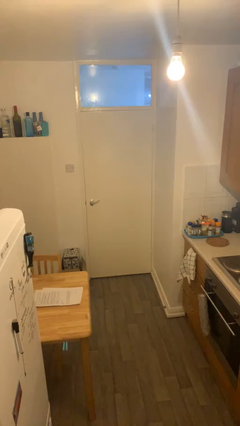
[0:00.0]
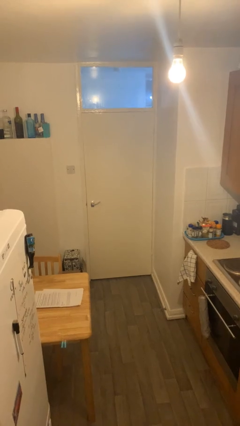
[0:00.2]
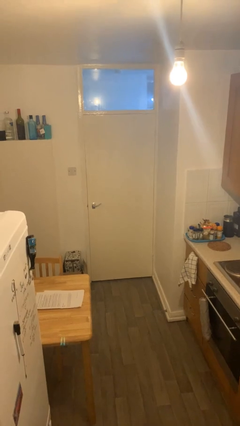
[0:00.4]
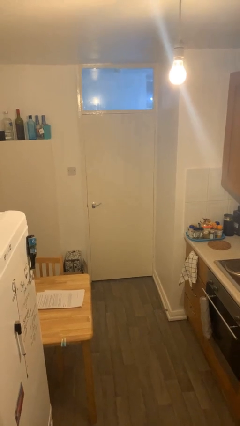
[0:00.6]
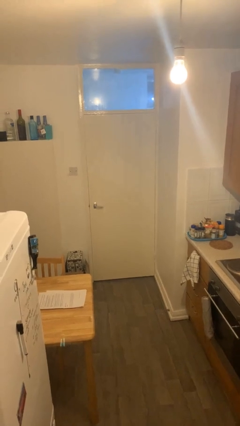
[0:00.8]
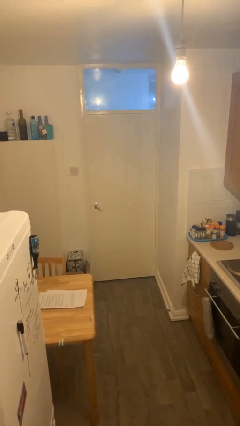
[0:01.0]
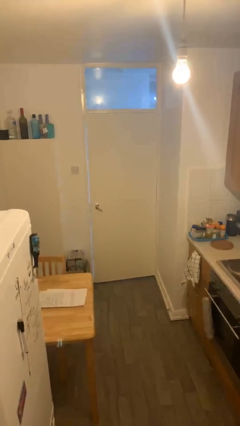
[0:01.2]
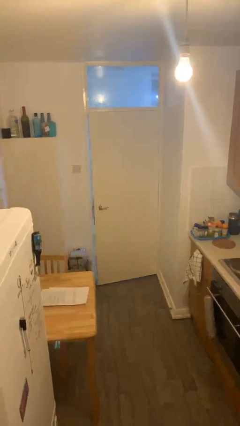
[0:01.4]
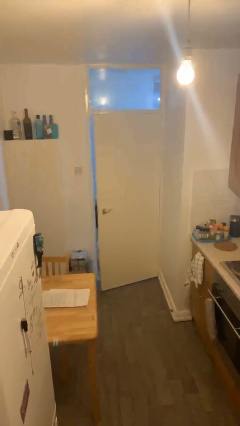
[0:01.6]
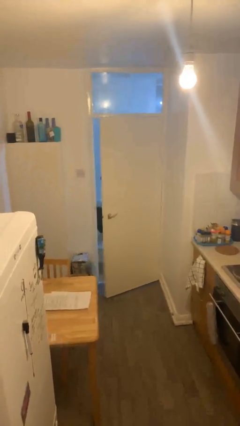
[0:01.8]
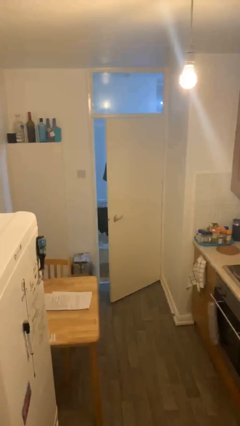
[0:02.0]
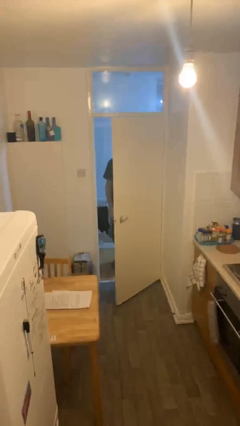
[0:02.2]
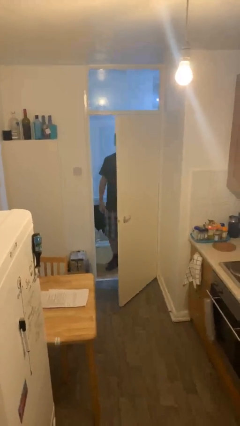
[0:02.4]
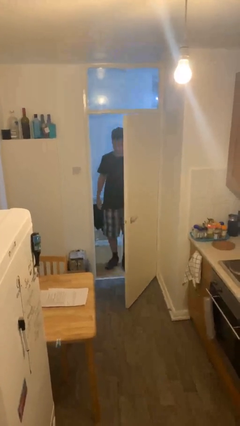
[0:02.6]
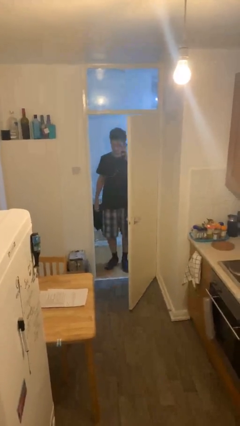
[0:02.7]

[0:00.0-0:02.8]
person opens facility door

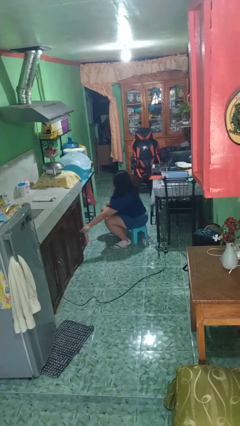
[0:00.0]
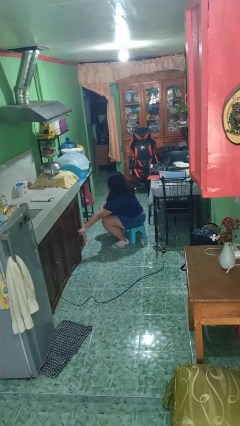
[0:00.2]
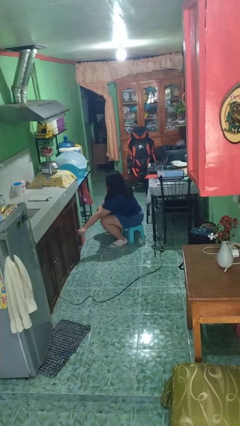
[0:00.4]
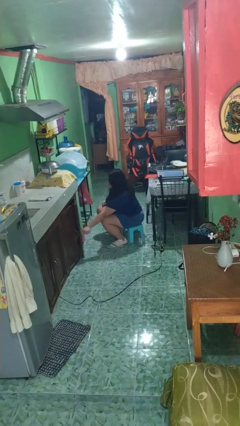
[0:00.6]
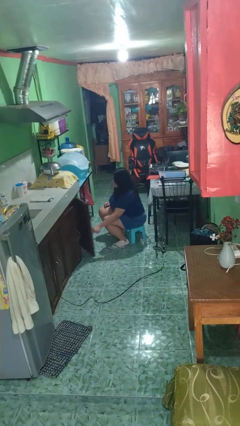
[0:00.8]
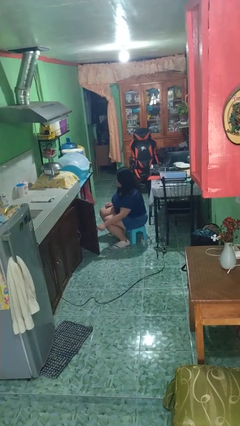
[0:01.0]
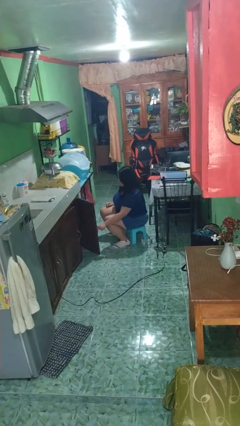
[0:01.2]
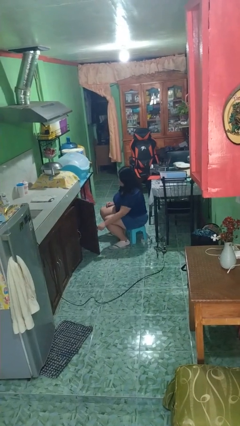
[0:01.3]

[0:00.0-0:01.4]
person opens cabinet

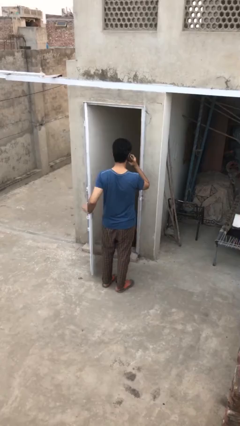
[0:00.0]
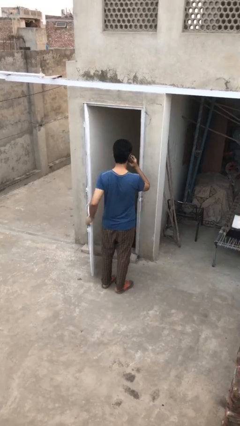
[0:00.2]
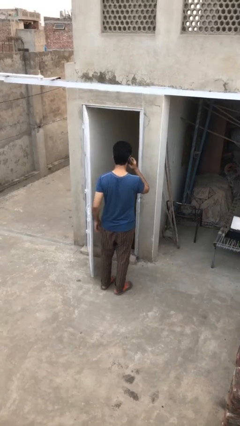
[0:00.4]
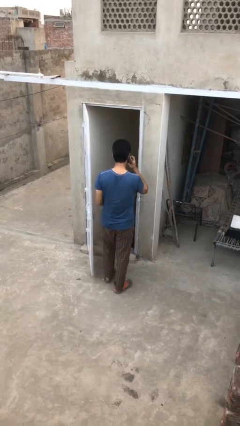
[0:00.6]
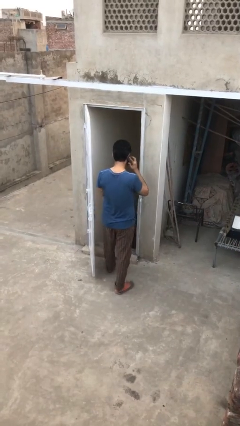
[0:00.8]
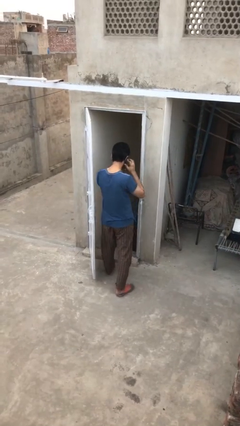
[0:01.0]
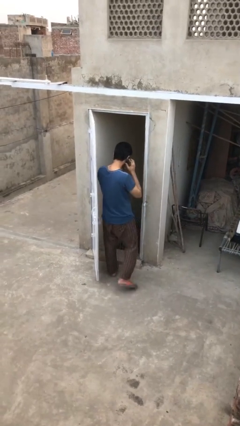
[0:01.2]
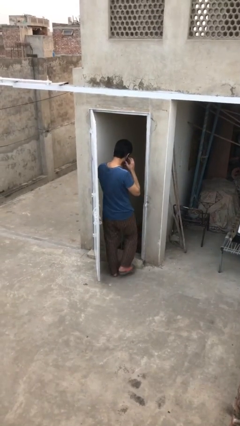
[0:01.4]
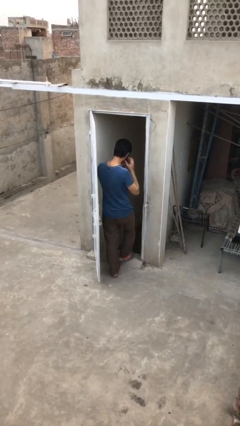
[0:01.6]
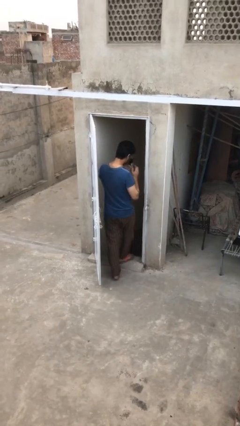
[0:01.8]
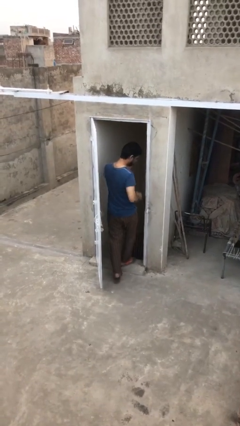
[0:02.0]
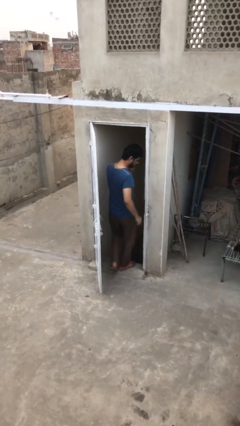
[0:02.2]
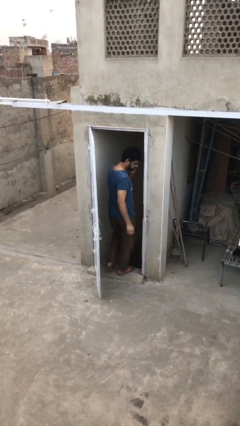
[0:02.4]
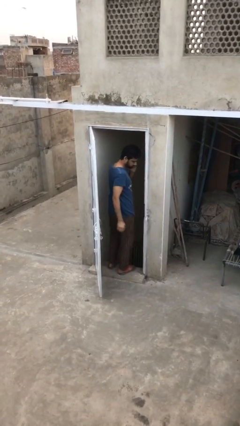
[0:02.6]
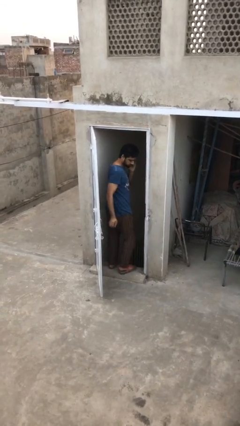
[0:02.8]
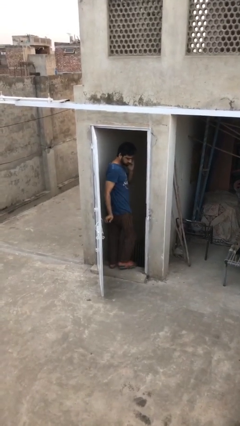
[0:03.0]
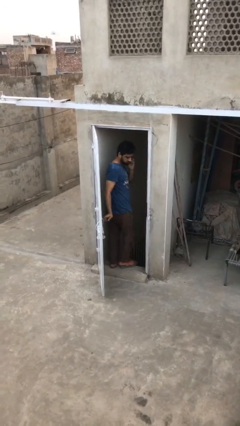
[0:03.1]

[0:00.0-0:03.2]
person exits scene through structure

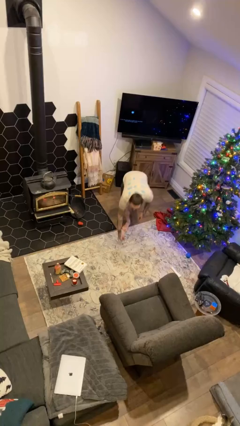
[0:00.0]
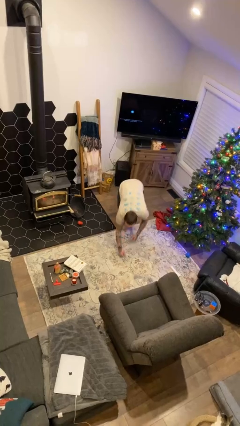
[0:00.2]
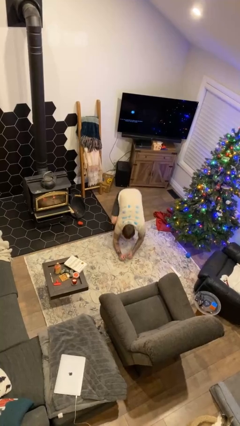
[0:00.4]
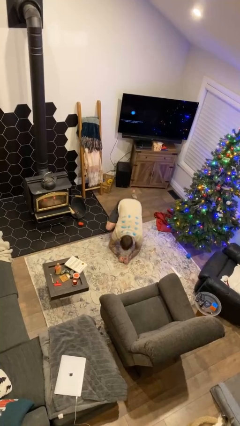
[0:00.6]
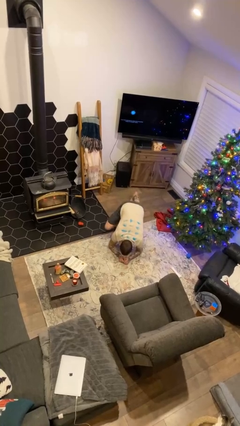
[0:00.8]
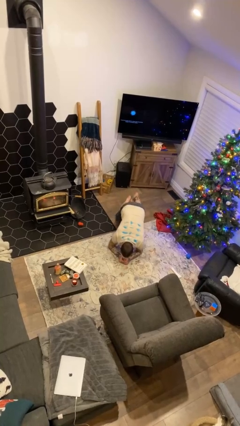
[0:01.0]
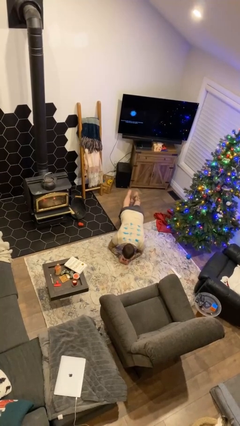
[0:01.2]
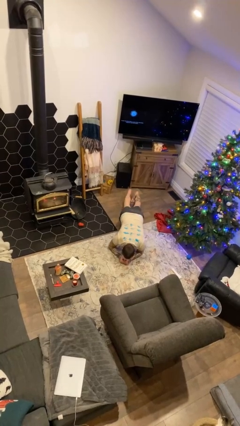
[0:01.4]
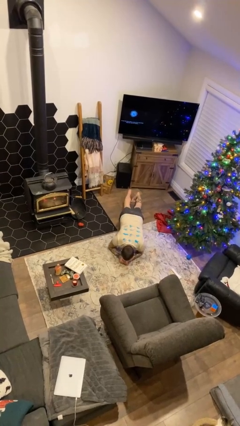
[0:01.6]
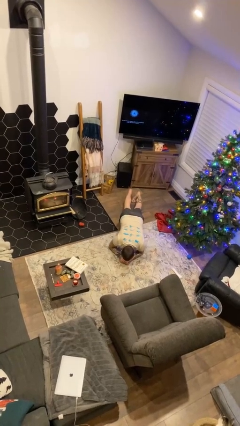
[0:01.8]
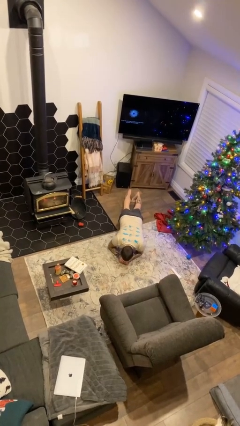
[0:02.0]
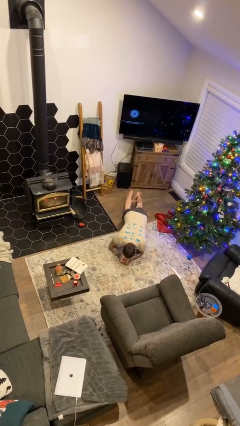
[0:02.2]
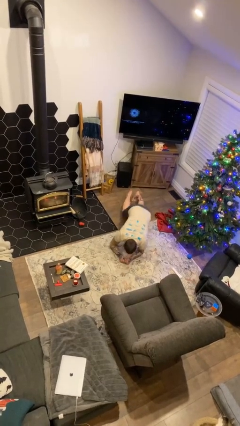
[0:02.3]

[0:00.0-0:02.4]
person exercises with plank

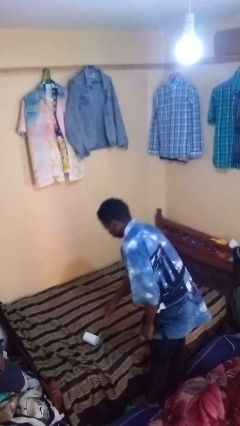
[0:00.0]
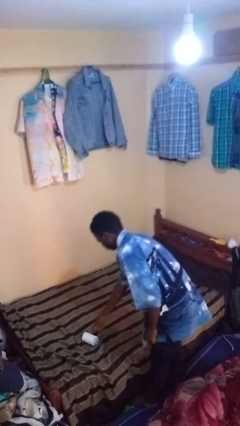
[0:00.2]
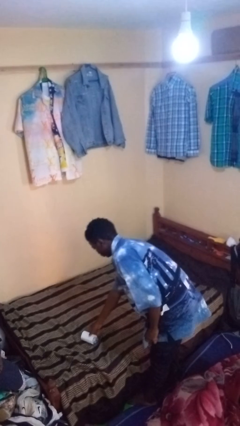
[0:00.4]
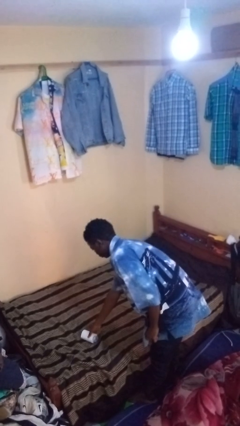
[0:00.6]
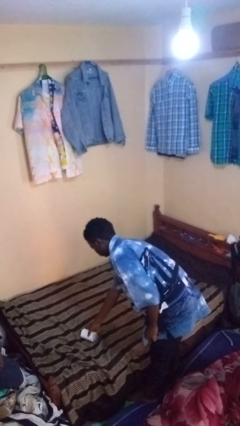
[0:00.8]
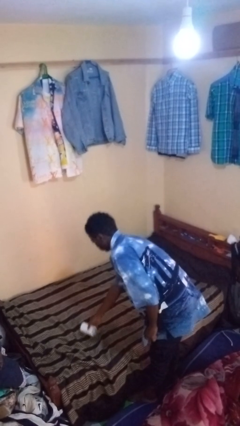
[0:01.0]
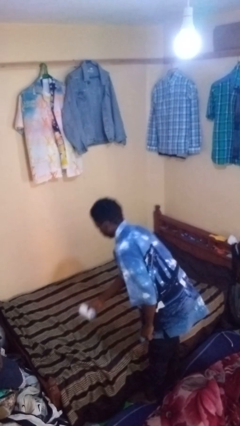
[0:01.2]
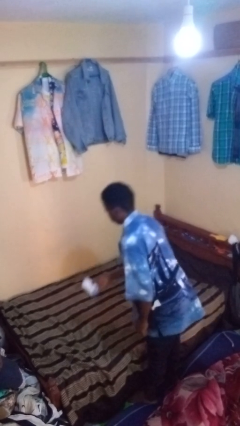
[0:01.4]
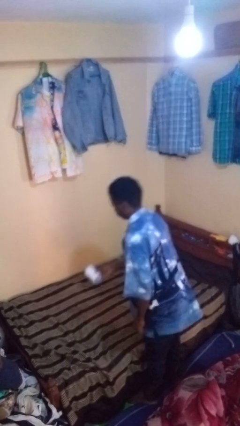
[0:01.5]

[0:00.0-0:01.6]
person picks up object from bed

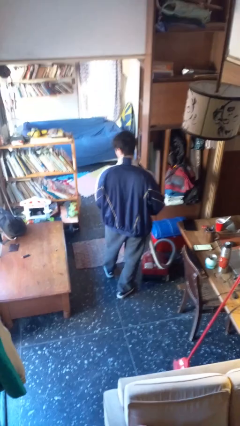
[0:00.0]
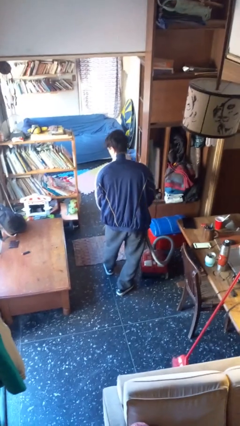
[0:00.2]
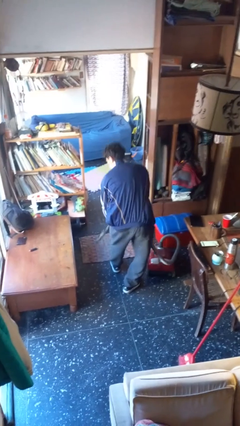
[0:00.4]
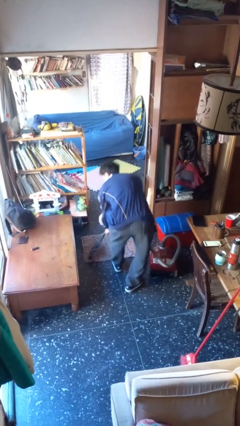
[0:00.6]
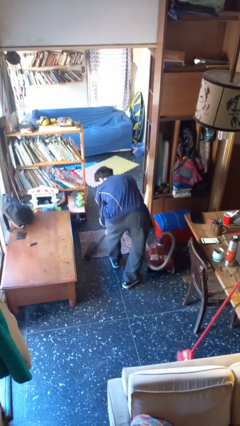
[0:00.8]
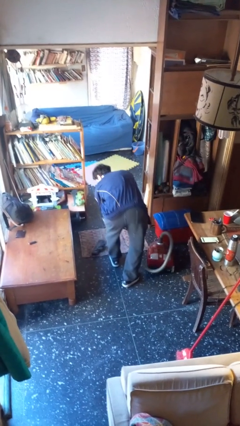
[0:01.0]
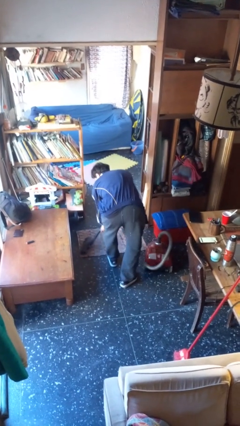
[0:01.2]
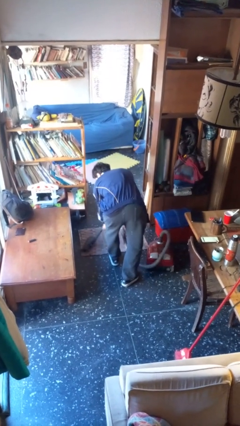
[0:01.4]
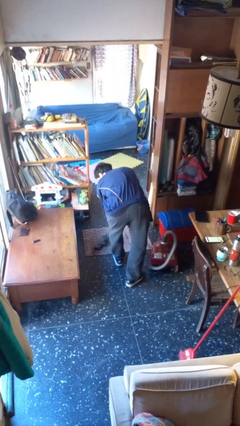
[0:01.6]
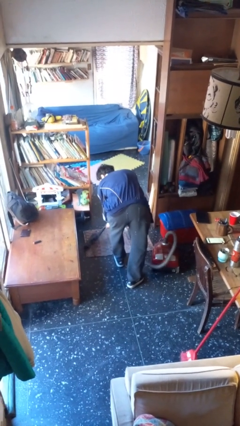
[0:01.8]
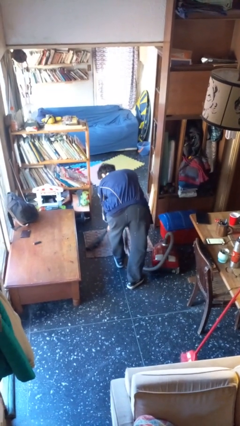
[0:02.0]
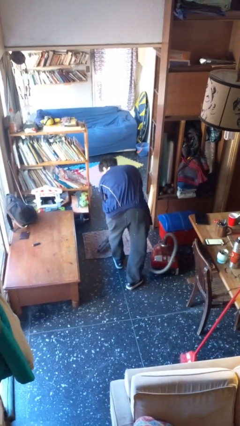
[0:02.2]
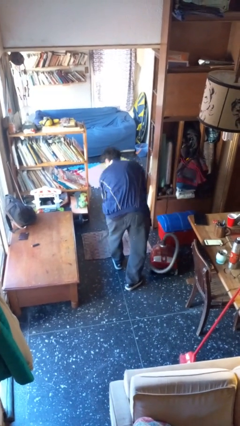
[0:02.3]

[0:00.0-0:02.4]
person vacuums carpet

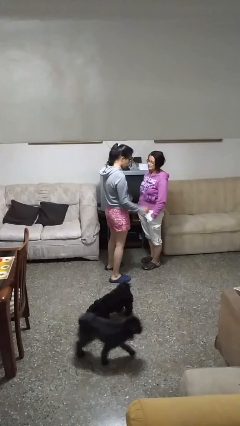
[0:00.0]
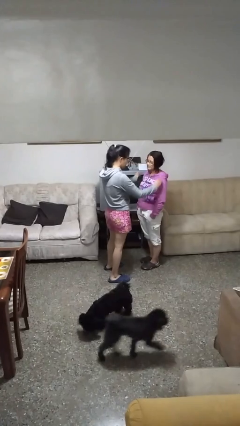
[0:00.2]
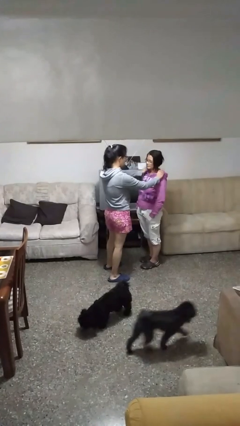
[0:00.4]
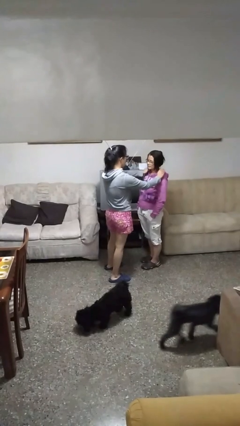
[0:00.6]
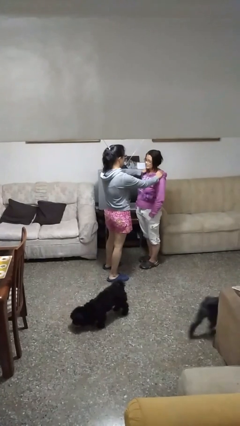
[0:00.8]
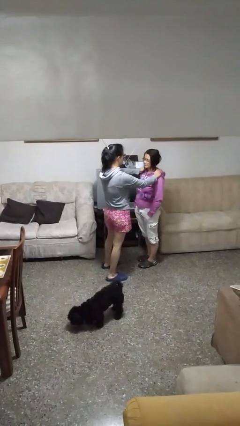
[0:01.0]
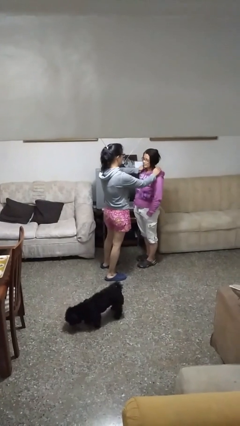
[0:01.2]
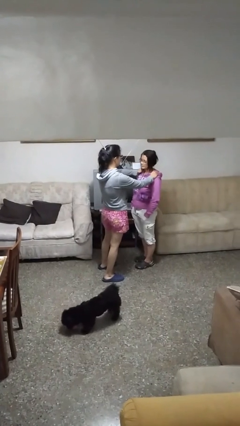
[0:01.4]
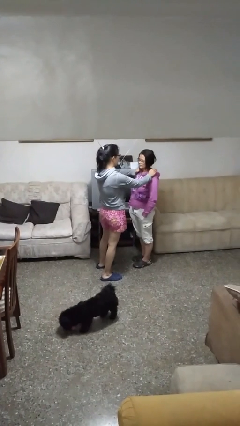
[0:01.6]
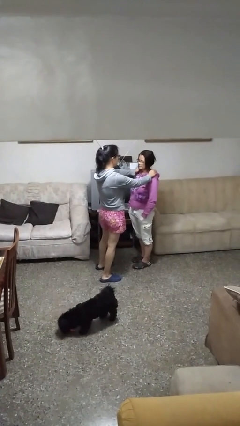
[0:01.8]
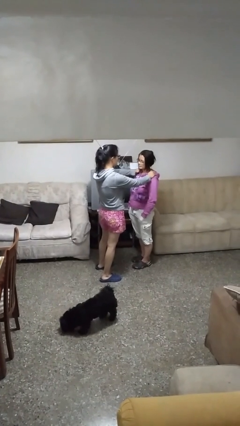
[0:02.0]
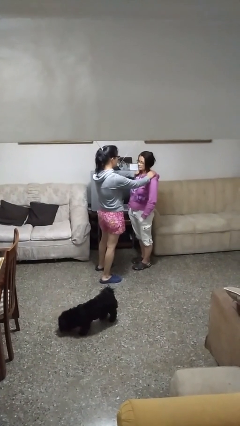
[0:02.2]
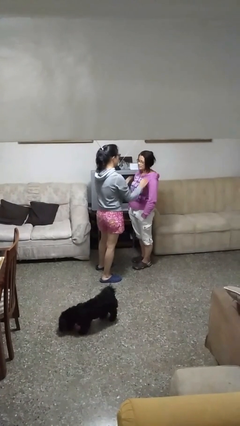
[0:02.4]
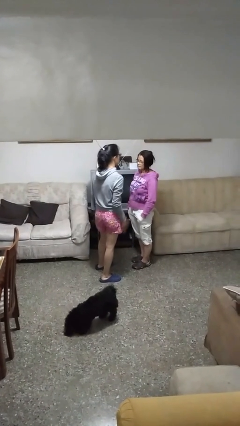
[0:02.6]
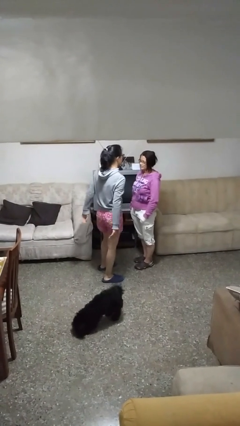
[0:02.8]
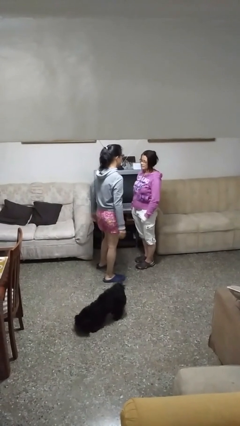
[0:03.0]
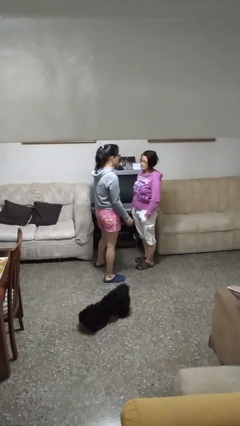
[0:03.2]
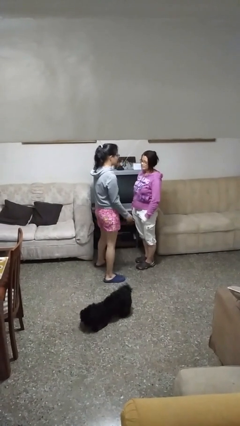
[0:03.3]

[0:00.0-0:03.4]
person pounds shoulders of person
